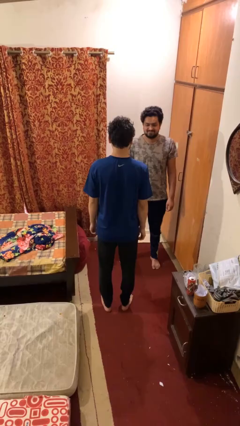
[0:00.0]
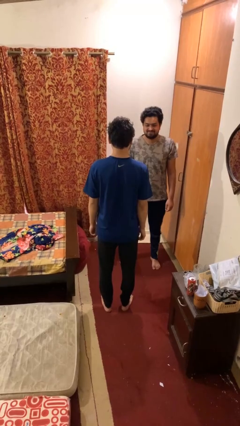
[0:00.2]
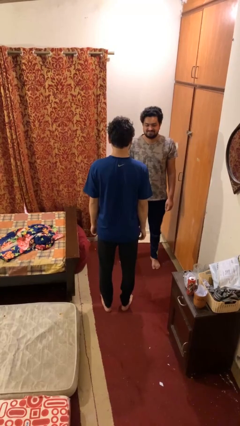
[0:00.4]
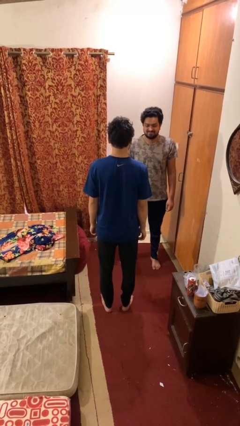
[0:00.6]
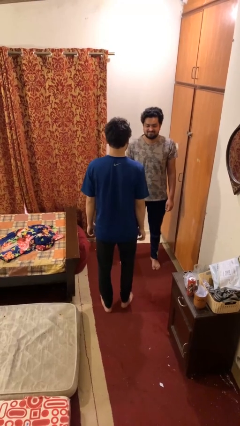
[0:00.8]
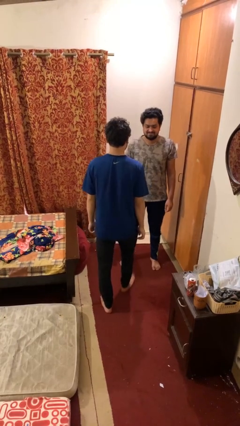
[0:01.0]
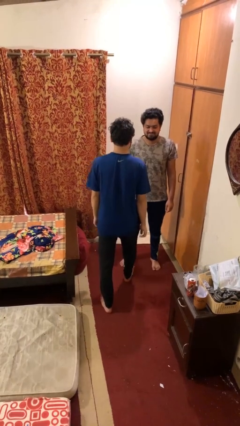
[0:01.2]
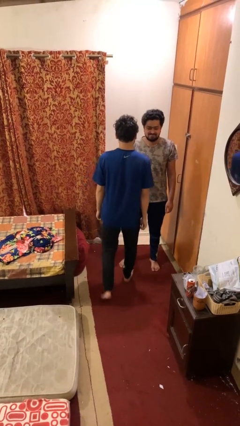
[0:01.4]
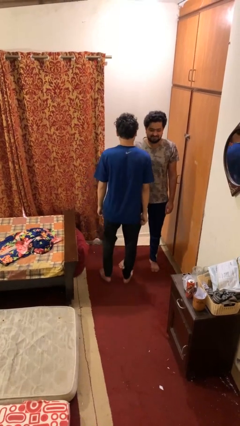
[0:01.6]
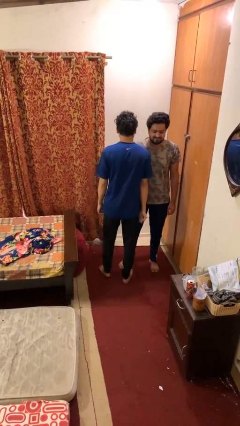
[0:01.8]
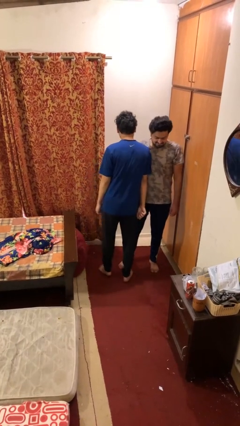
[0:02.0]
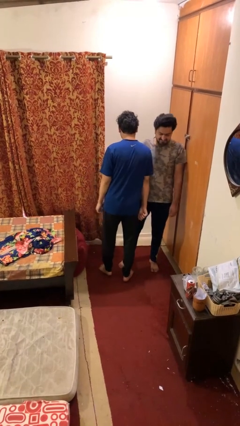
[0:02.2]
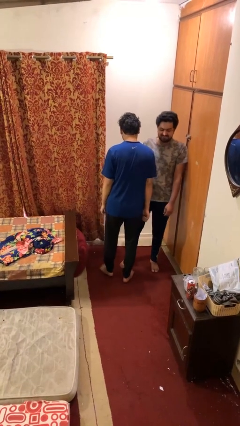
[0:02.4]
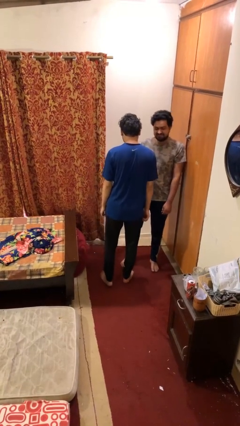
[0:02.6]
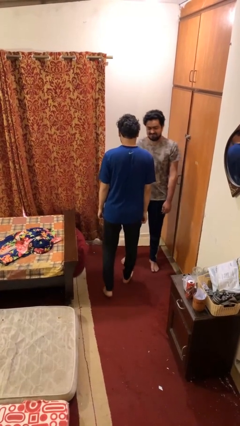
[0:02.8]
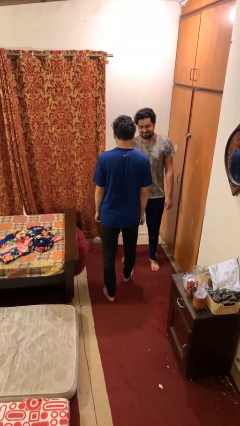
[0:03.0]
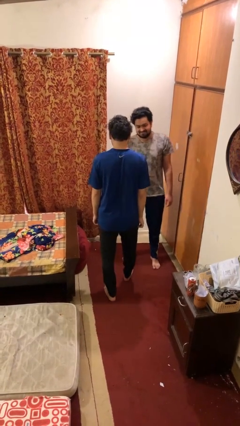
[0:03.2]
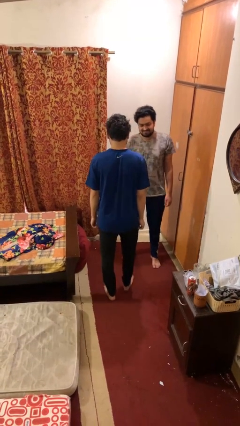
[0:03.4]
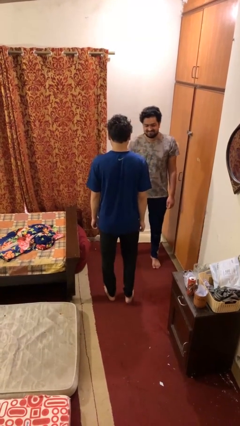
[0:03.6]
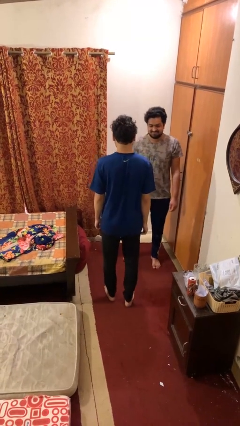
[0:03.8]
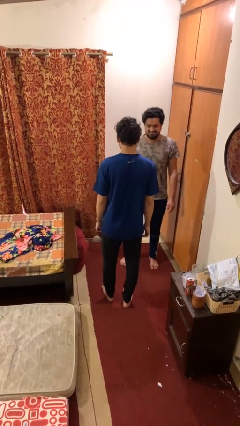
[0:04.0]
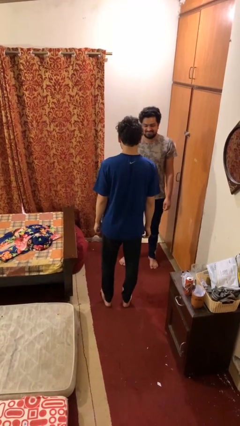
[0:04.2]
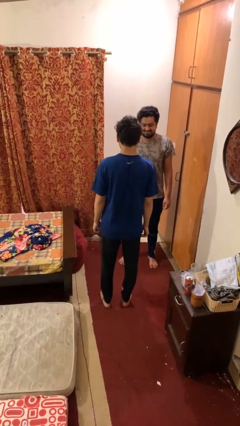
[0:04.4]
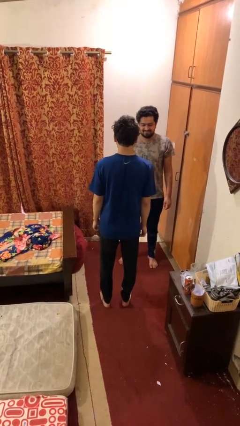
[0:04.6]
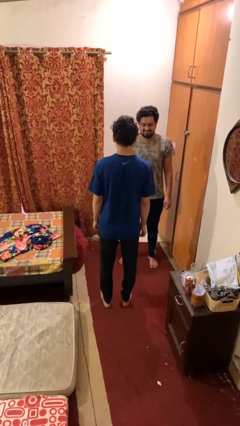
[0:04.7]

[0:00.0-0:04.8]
person bumps into person

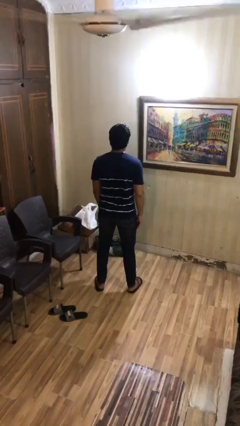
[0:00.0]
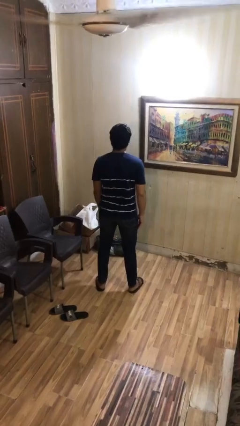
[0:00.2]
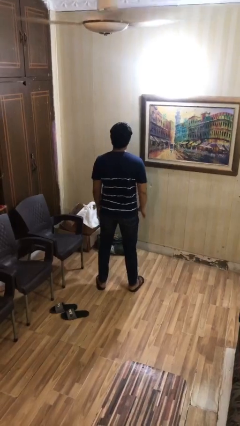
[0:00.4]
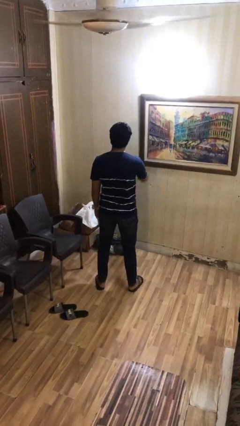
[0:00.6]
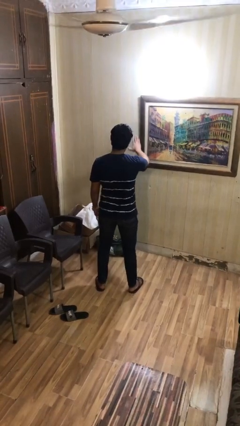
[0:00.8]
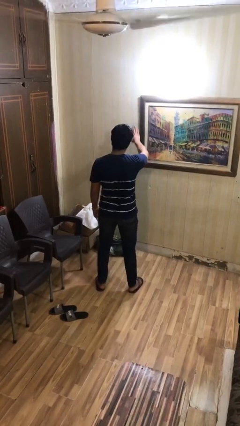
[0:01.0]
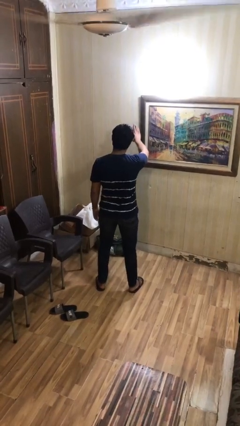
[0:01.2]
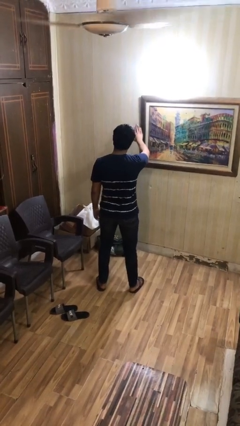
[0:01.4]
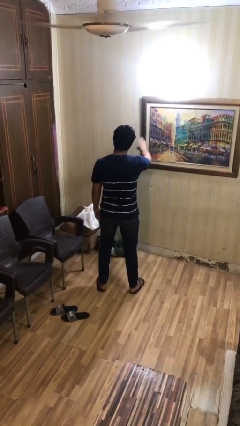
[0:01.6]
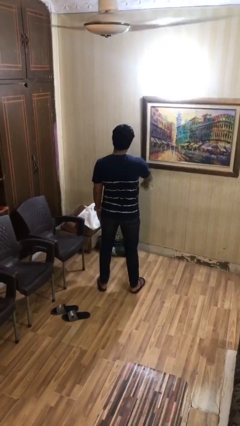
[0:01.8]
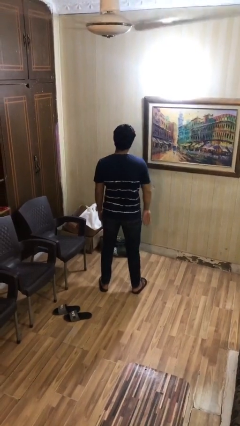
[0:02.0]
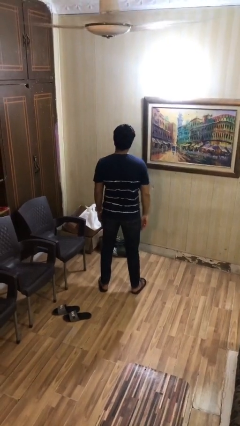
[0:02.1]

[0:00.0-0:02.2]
person gestures stop

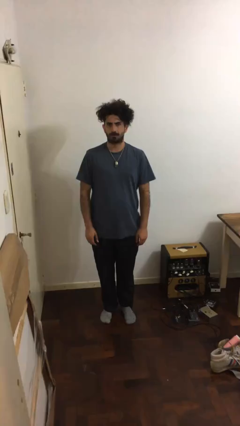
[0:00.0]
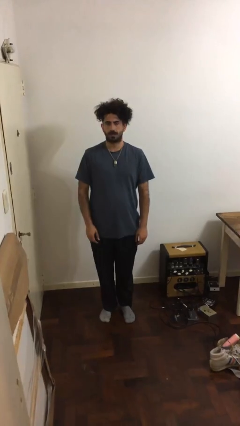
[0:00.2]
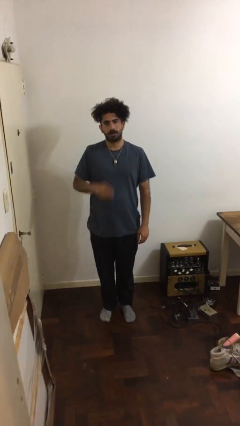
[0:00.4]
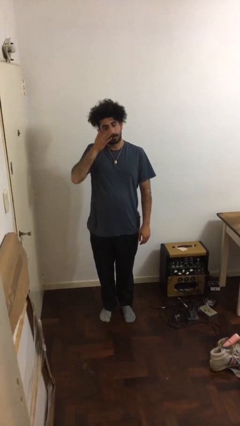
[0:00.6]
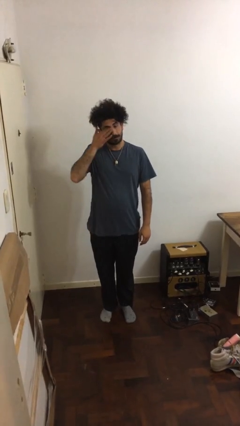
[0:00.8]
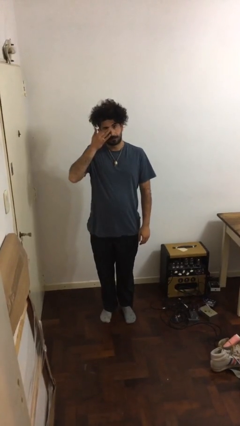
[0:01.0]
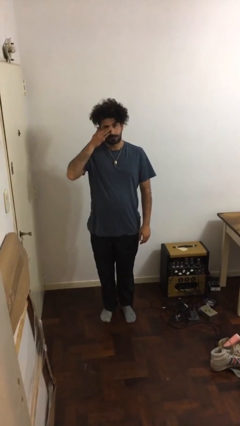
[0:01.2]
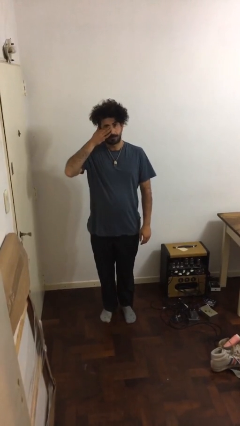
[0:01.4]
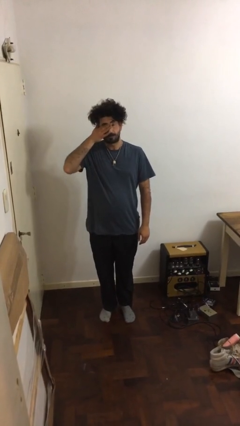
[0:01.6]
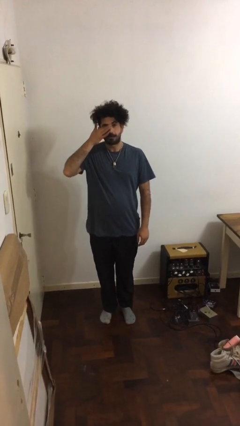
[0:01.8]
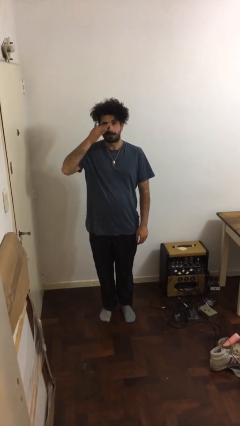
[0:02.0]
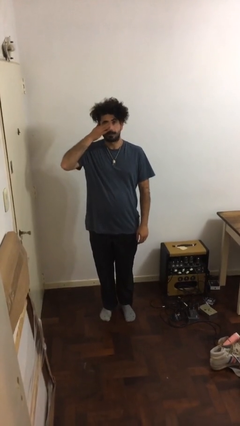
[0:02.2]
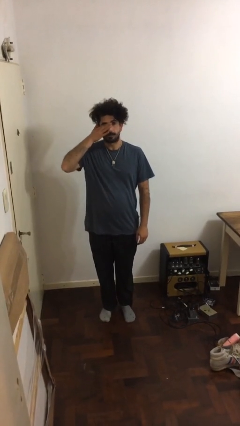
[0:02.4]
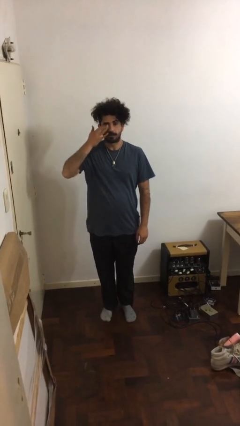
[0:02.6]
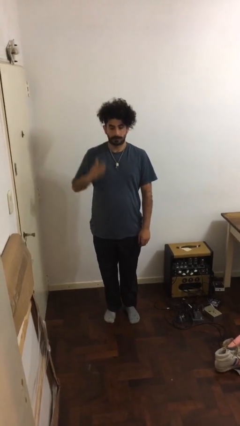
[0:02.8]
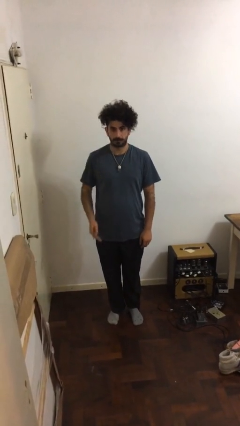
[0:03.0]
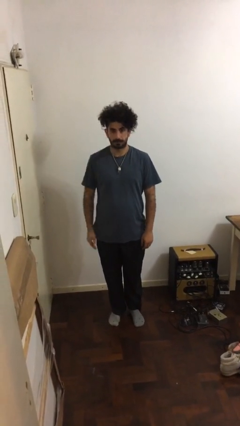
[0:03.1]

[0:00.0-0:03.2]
person stands up from floor

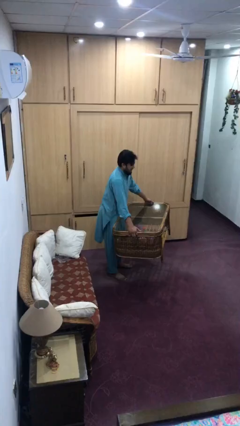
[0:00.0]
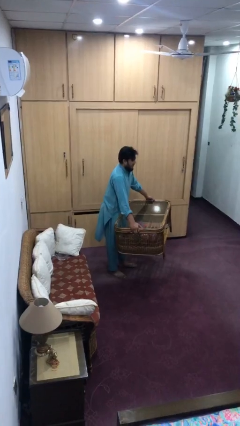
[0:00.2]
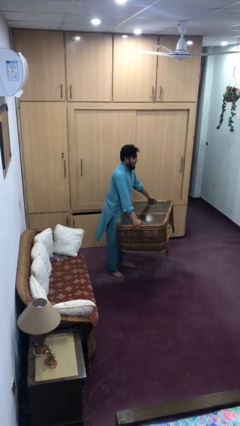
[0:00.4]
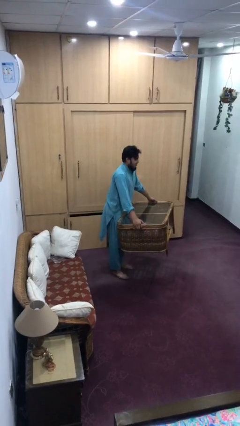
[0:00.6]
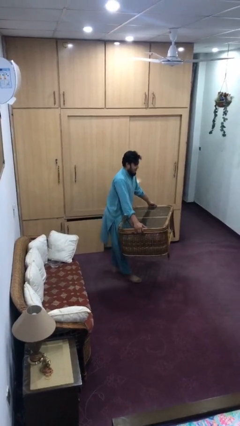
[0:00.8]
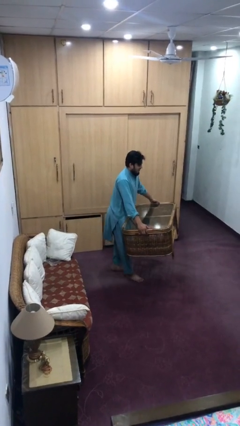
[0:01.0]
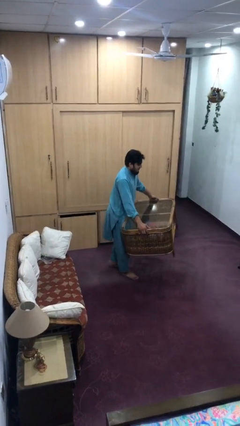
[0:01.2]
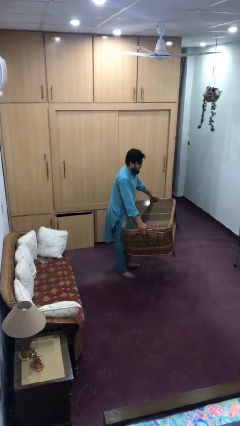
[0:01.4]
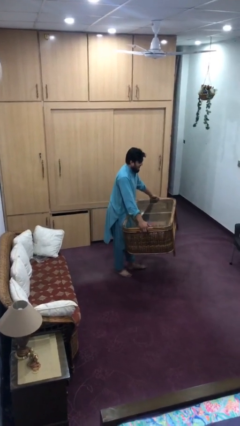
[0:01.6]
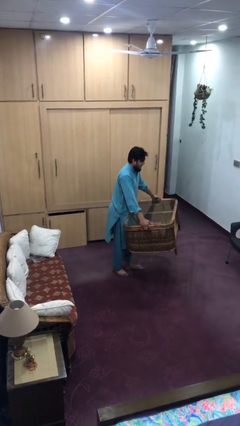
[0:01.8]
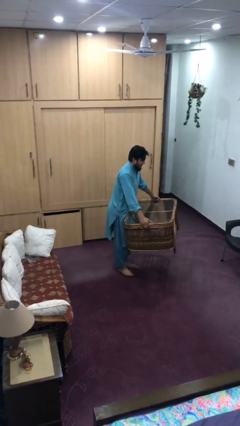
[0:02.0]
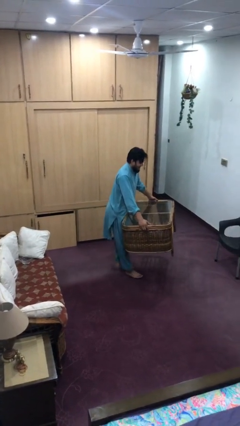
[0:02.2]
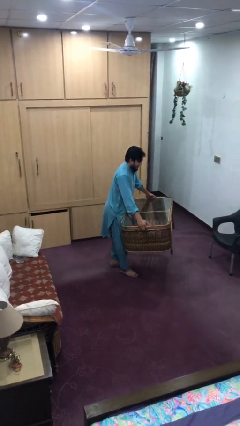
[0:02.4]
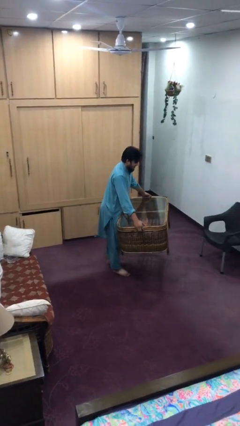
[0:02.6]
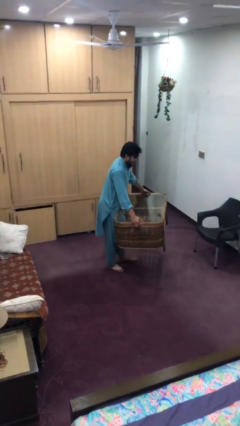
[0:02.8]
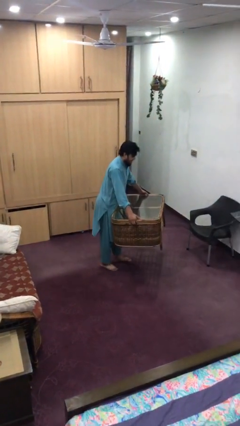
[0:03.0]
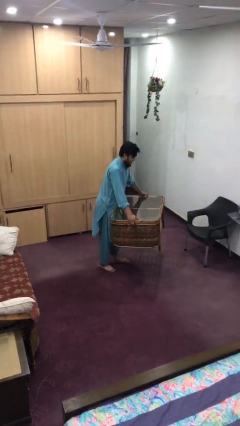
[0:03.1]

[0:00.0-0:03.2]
person carries heavy object

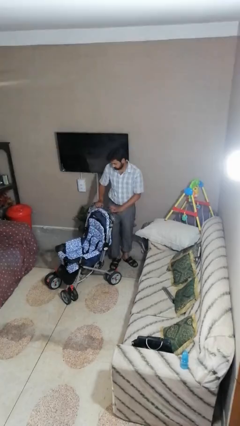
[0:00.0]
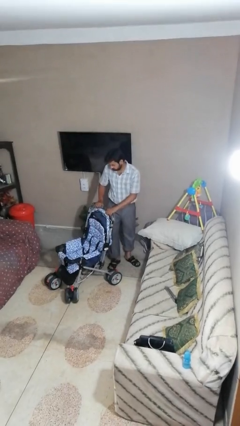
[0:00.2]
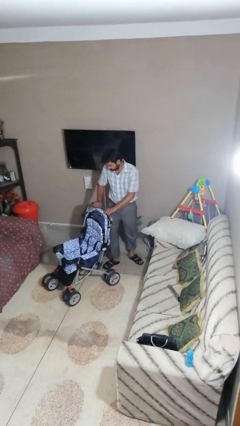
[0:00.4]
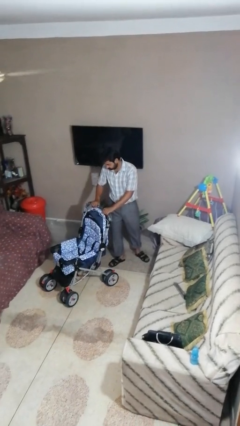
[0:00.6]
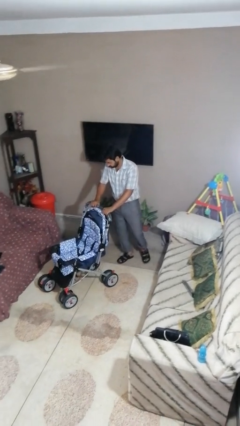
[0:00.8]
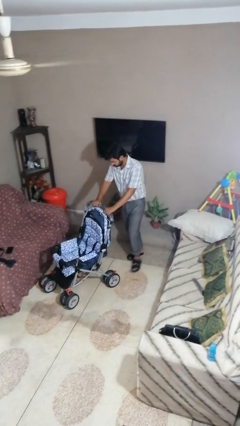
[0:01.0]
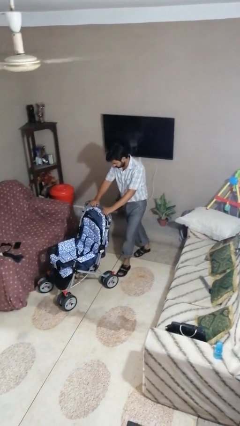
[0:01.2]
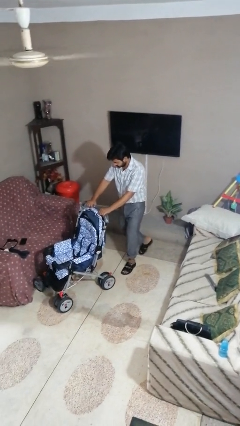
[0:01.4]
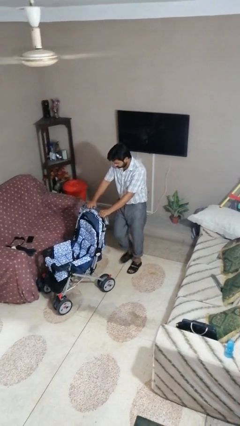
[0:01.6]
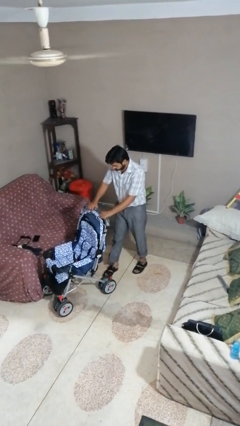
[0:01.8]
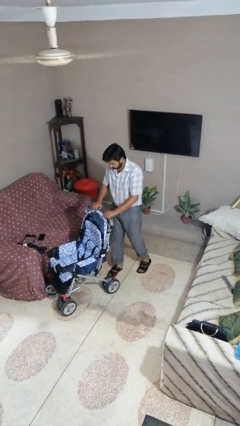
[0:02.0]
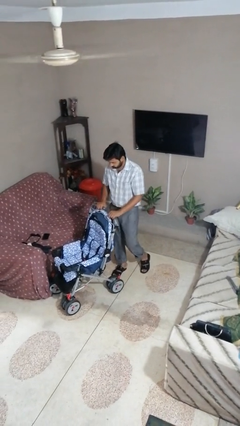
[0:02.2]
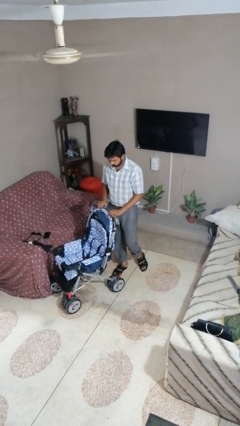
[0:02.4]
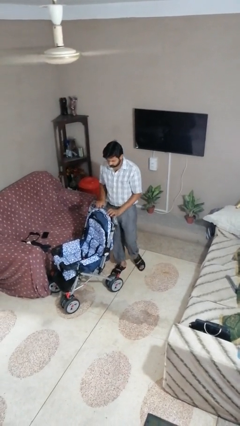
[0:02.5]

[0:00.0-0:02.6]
person pushes wheeled cart

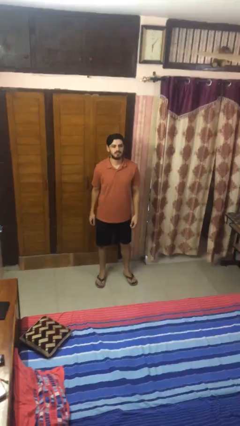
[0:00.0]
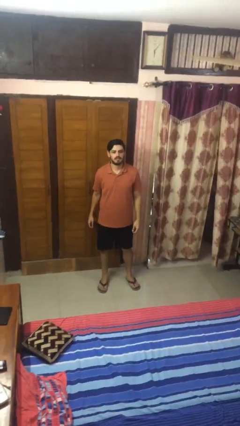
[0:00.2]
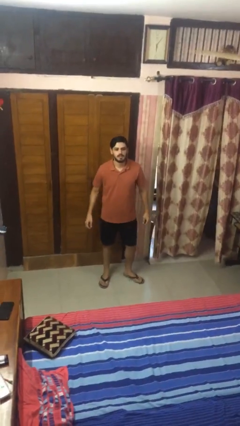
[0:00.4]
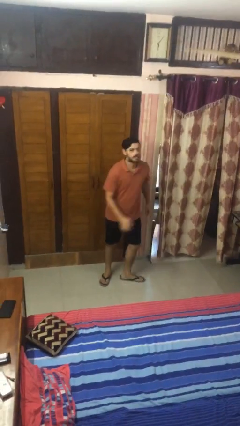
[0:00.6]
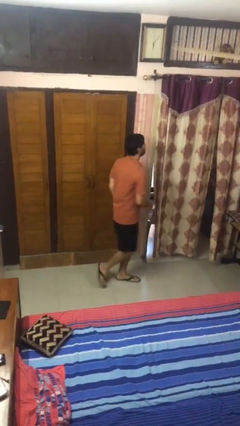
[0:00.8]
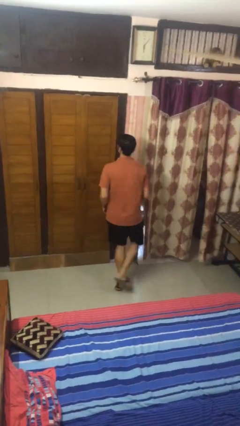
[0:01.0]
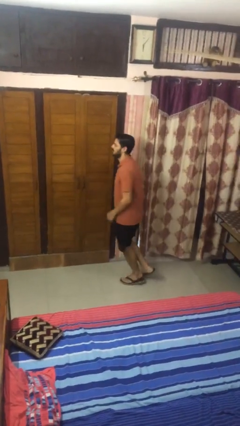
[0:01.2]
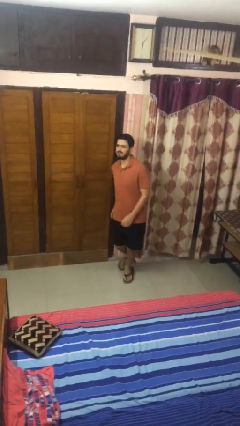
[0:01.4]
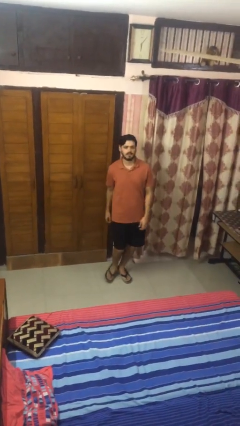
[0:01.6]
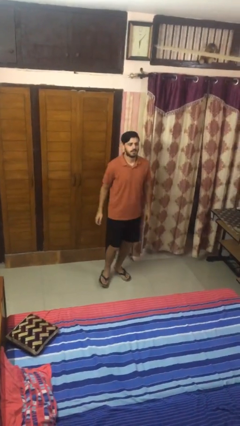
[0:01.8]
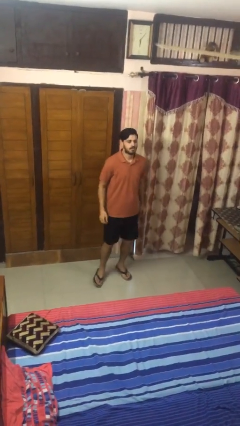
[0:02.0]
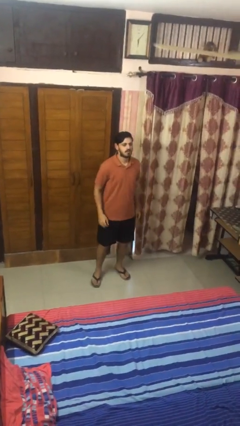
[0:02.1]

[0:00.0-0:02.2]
person twirls
